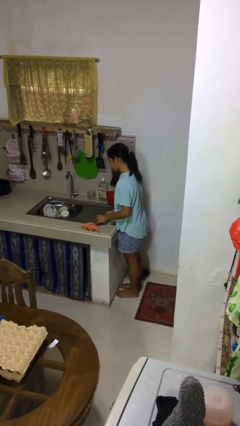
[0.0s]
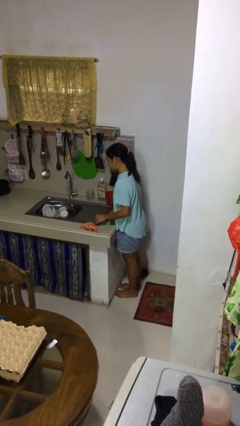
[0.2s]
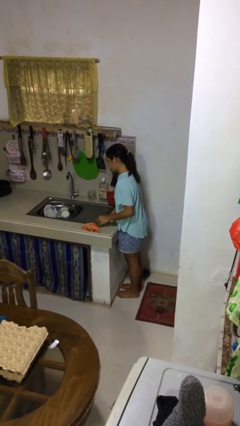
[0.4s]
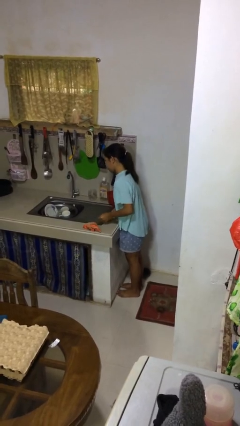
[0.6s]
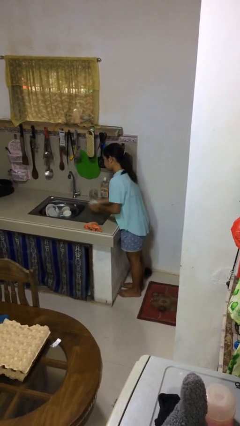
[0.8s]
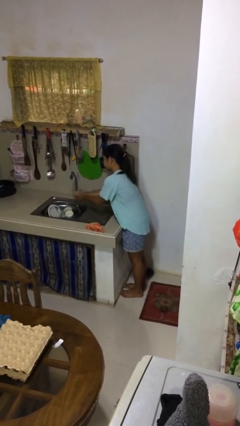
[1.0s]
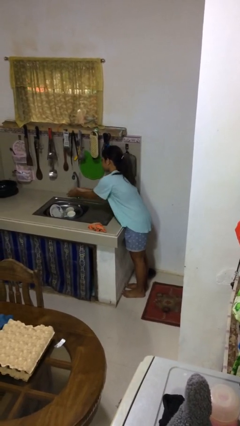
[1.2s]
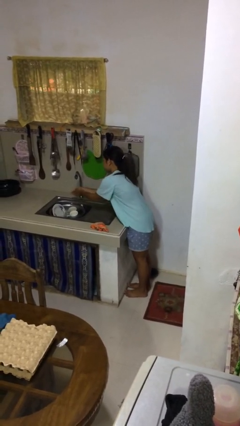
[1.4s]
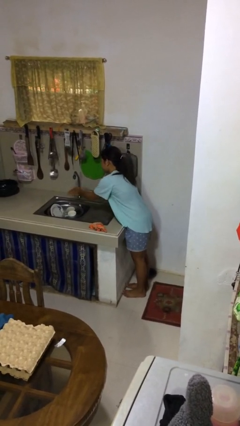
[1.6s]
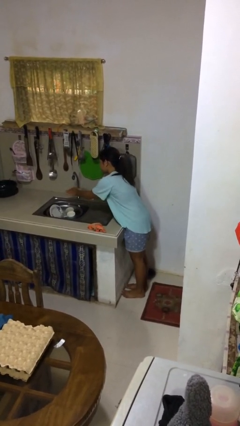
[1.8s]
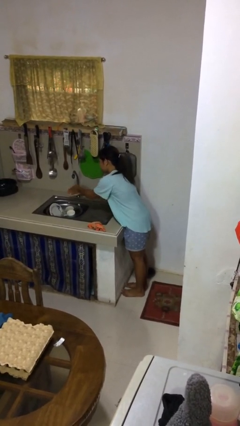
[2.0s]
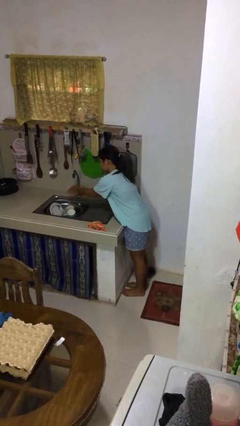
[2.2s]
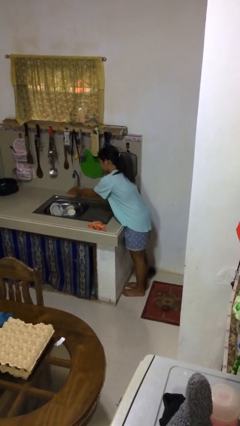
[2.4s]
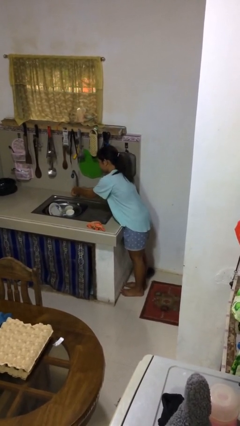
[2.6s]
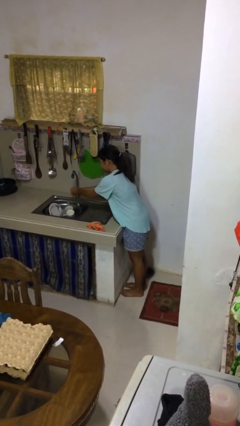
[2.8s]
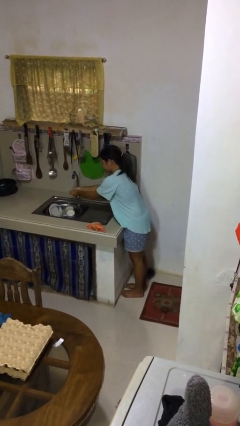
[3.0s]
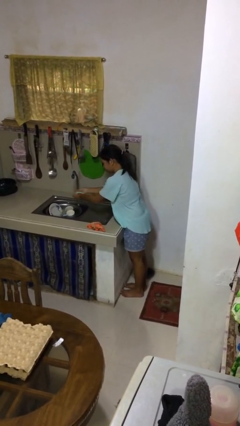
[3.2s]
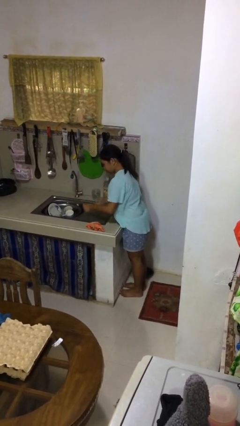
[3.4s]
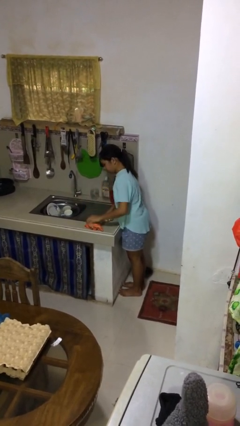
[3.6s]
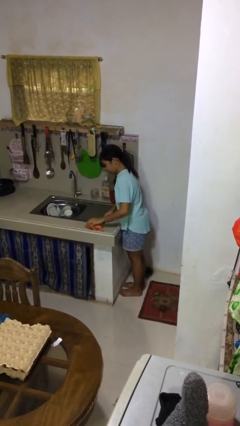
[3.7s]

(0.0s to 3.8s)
person washes hands

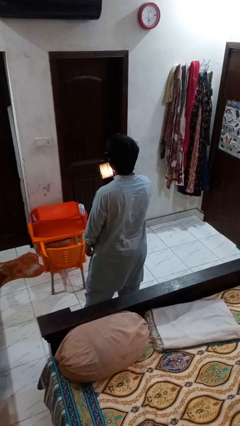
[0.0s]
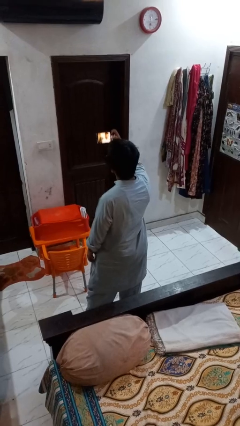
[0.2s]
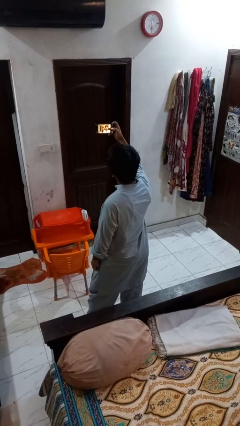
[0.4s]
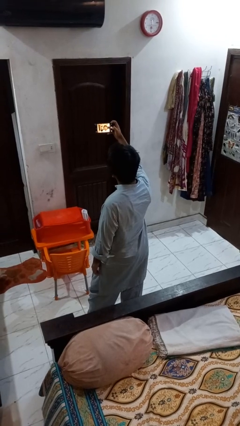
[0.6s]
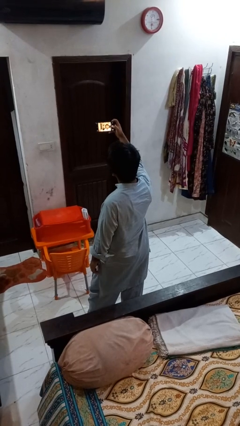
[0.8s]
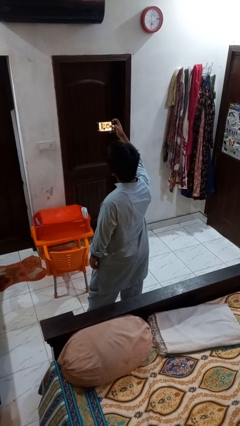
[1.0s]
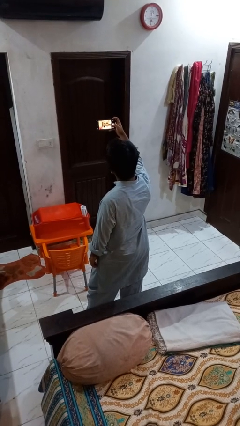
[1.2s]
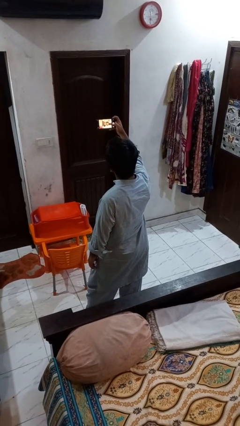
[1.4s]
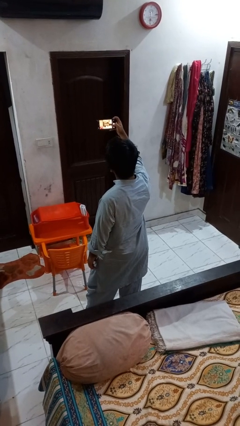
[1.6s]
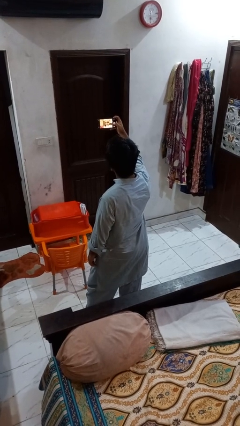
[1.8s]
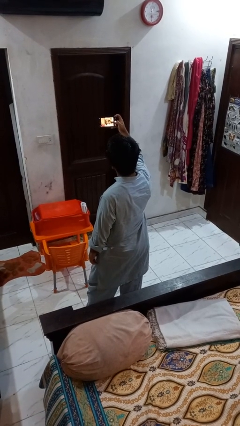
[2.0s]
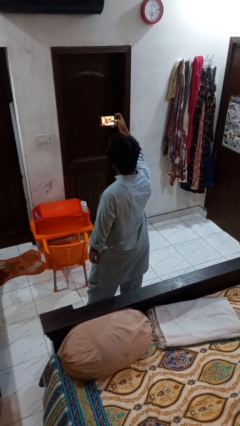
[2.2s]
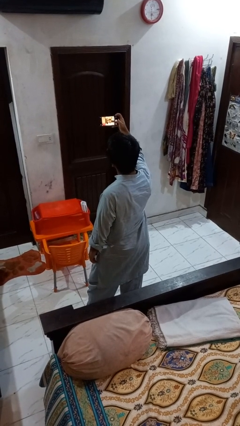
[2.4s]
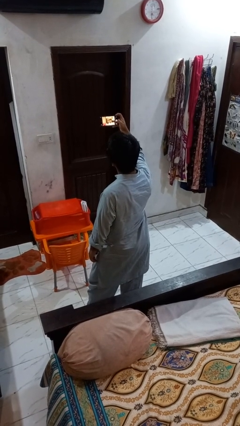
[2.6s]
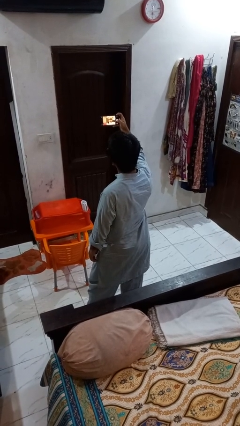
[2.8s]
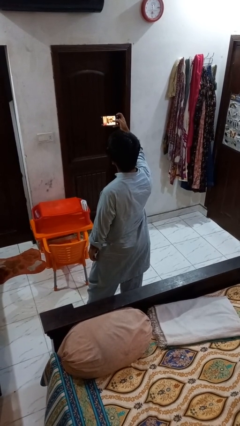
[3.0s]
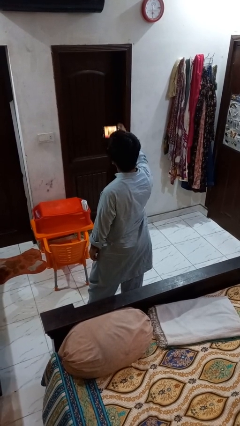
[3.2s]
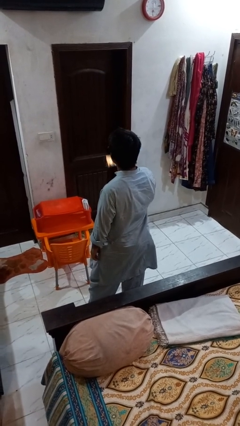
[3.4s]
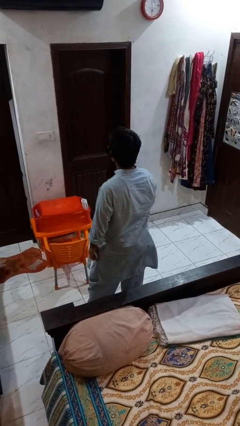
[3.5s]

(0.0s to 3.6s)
person takes selfie

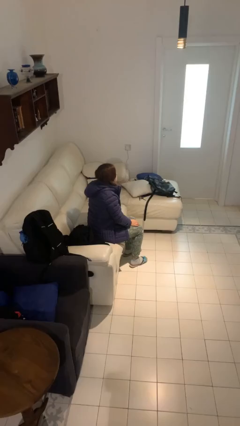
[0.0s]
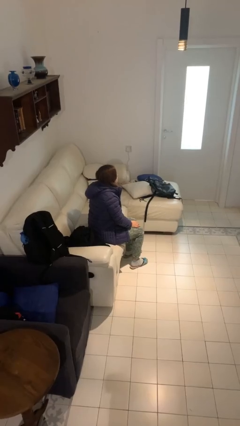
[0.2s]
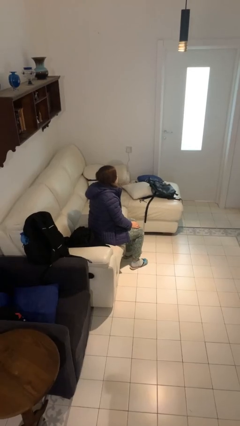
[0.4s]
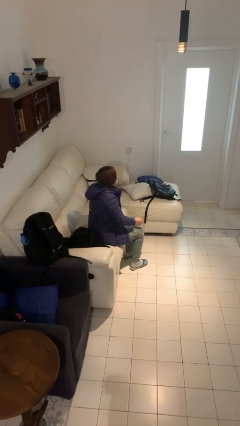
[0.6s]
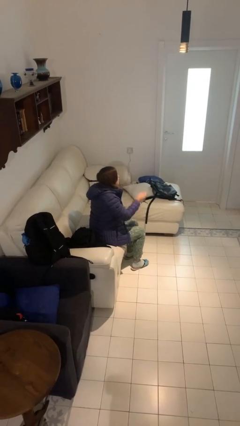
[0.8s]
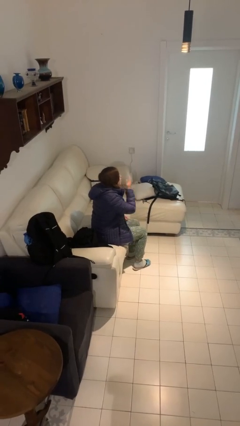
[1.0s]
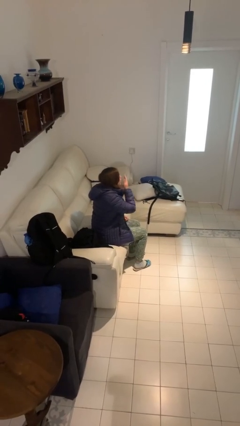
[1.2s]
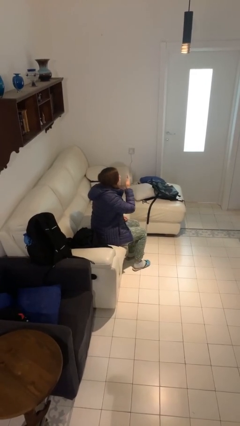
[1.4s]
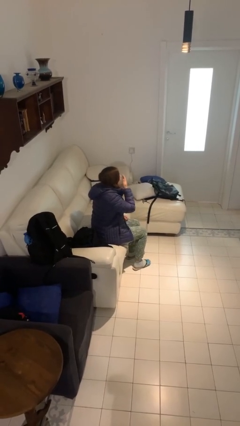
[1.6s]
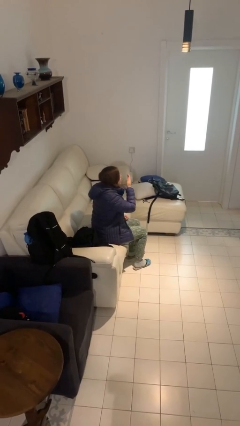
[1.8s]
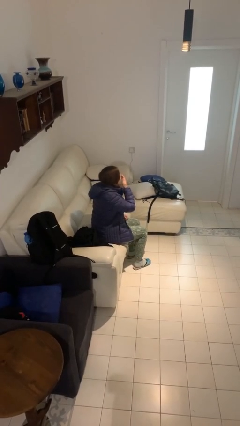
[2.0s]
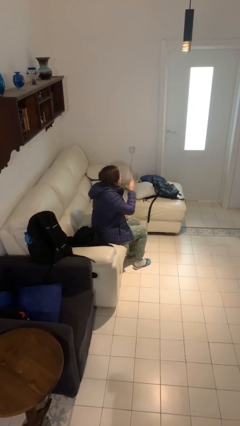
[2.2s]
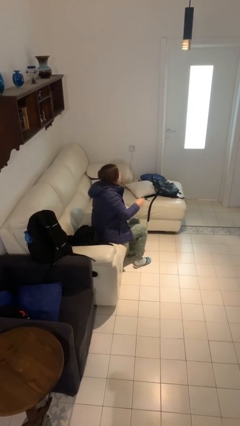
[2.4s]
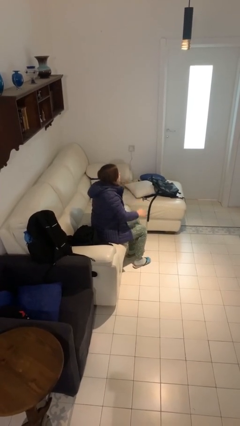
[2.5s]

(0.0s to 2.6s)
person yawns

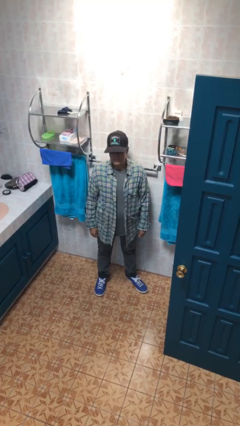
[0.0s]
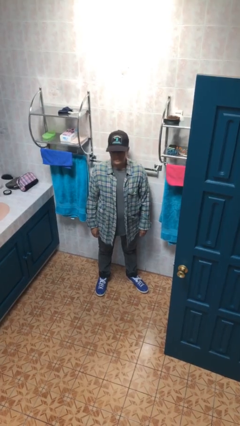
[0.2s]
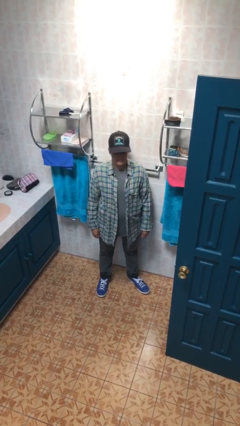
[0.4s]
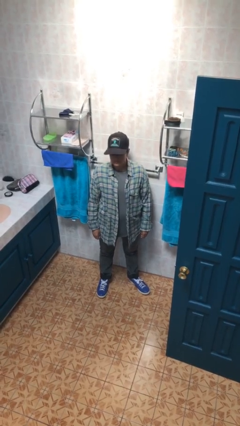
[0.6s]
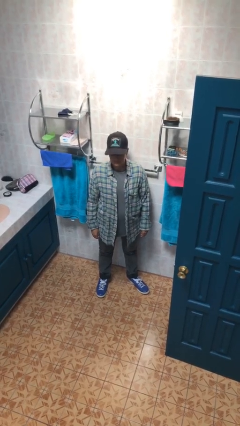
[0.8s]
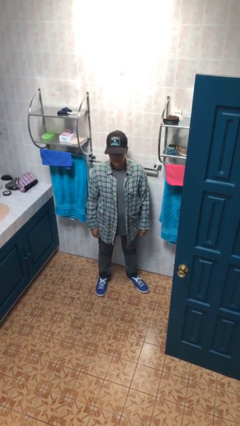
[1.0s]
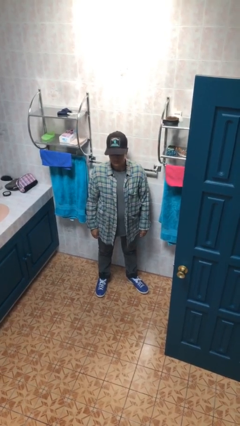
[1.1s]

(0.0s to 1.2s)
person shakes head

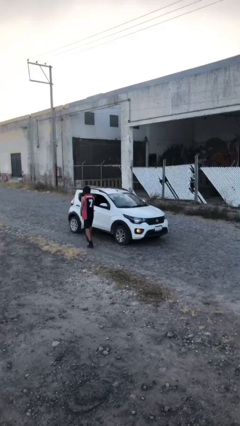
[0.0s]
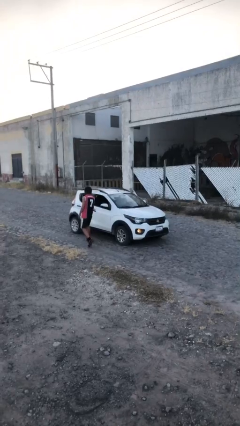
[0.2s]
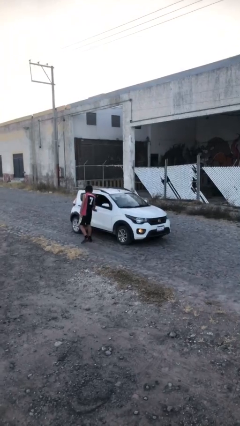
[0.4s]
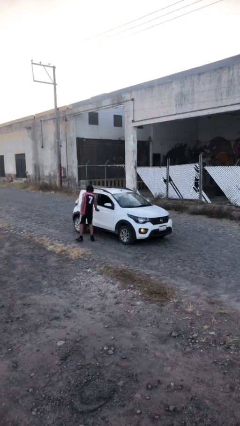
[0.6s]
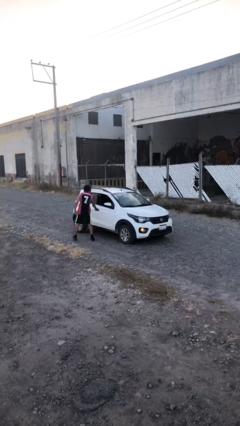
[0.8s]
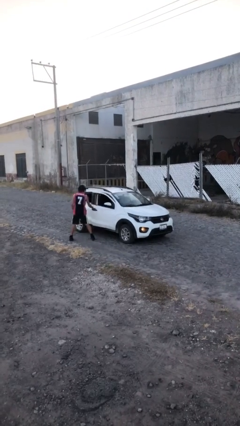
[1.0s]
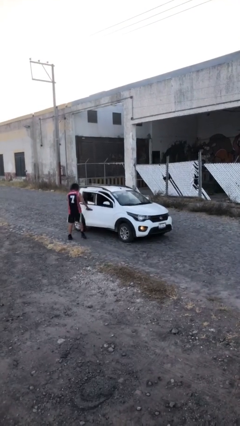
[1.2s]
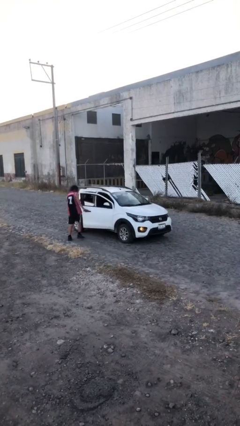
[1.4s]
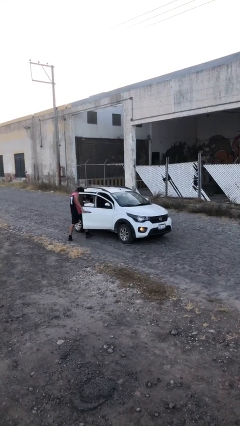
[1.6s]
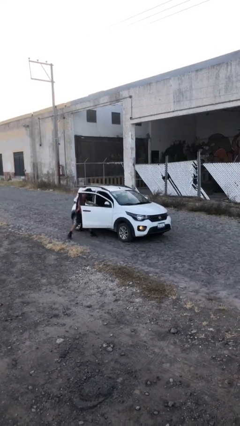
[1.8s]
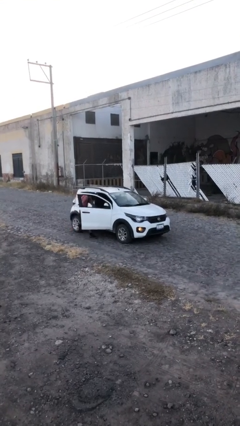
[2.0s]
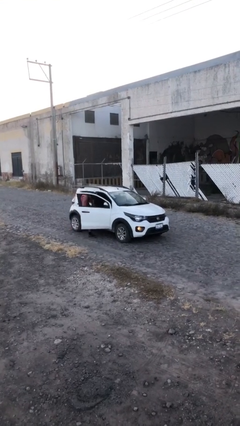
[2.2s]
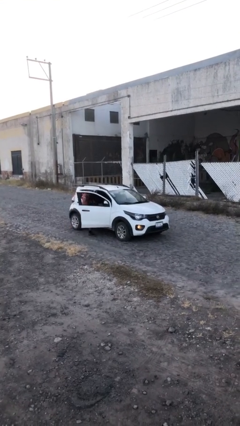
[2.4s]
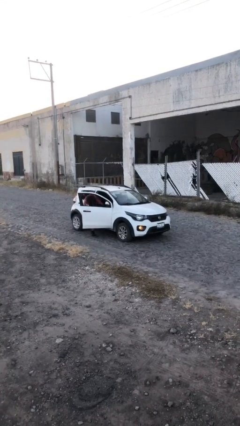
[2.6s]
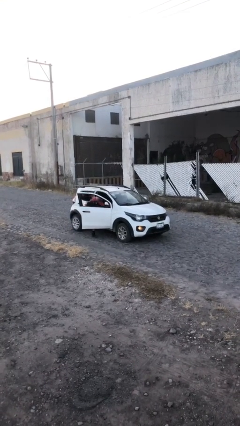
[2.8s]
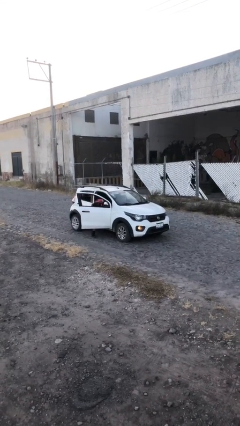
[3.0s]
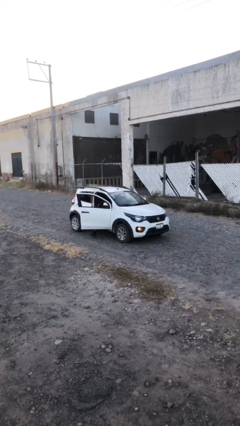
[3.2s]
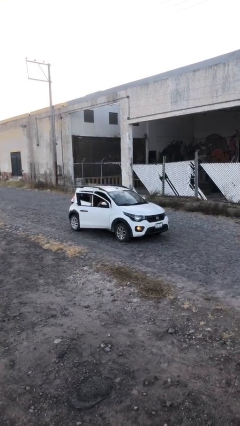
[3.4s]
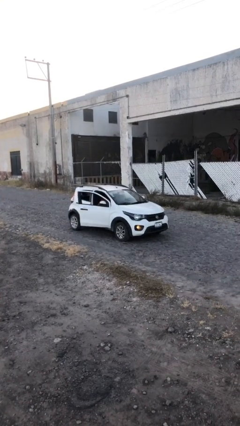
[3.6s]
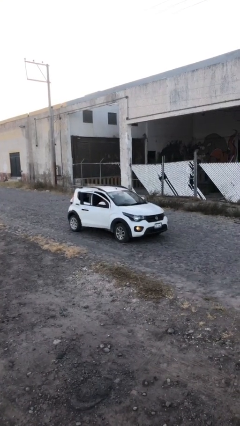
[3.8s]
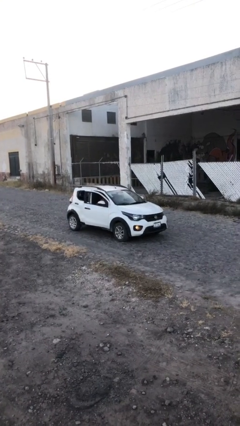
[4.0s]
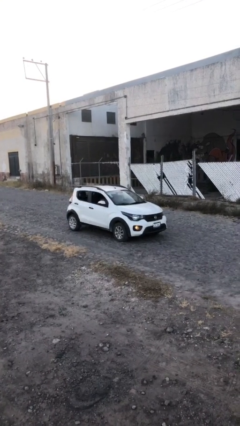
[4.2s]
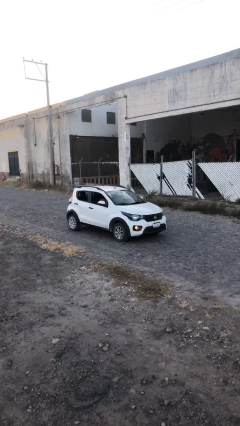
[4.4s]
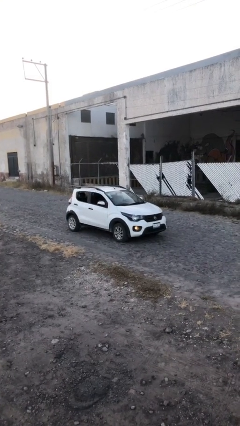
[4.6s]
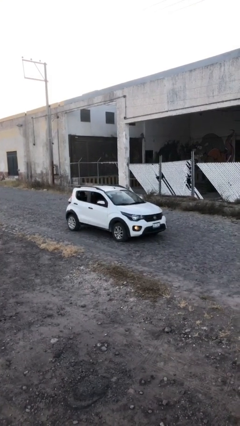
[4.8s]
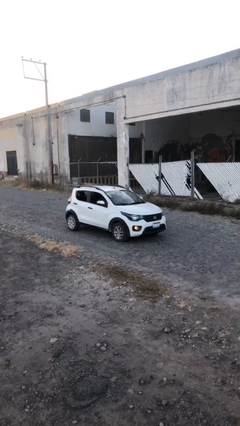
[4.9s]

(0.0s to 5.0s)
car picks up person

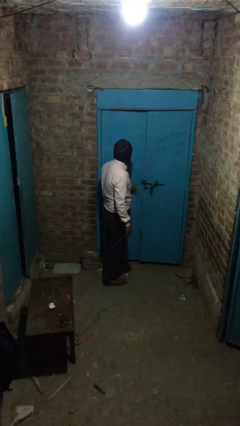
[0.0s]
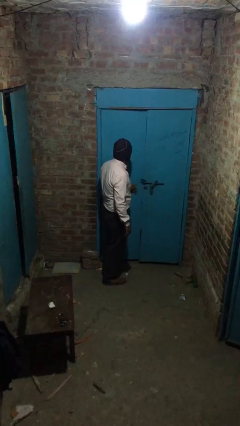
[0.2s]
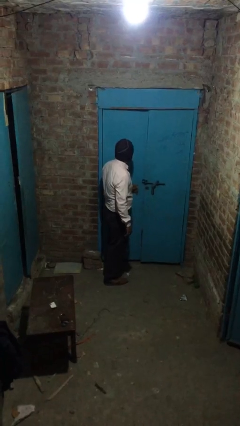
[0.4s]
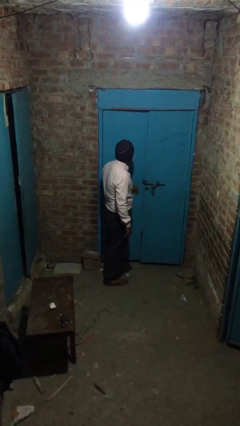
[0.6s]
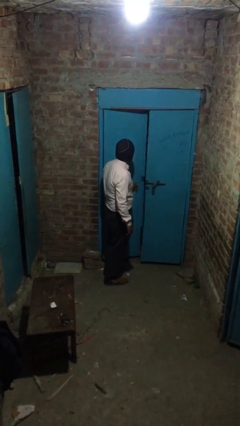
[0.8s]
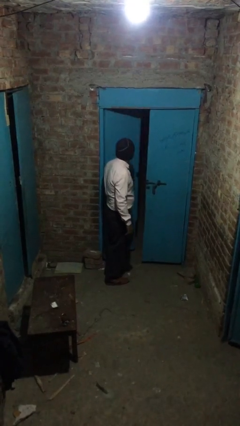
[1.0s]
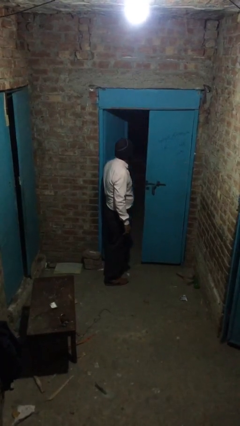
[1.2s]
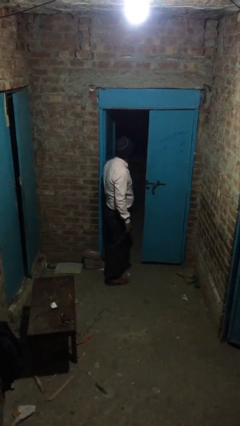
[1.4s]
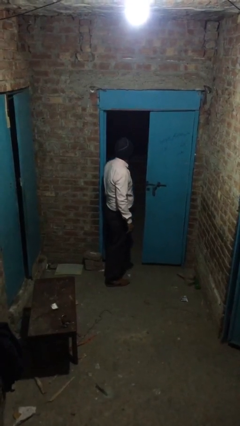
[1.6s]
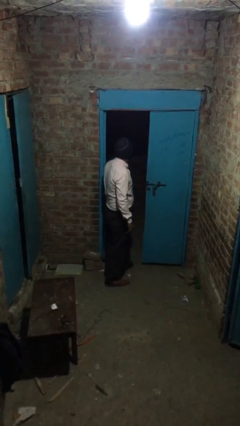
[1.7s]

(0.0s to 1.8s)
person opens facility door
